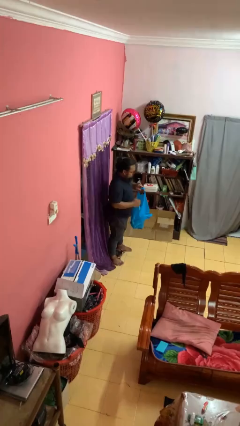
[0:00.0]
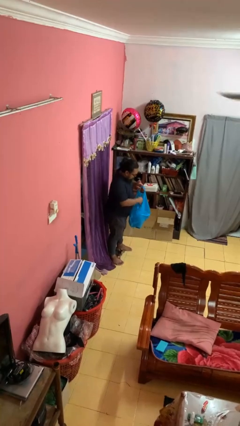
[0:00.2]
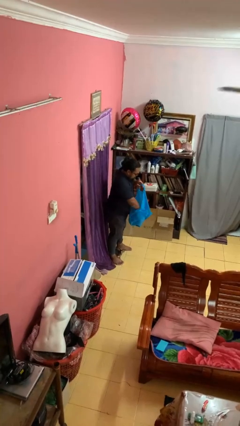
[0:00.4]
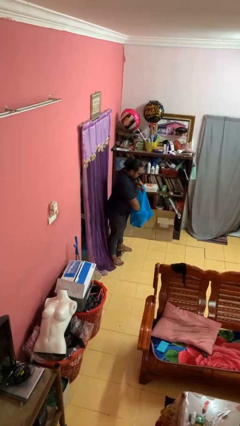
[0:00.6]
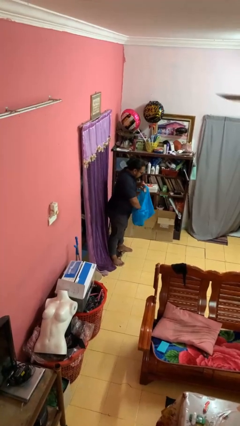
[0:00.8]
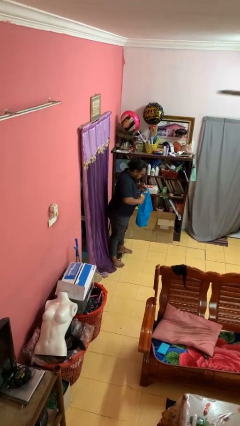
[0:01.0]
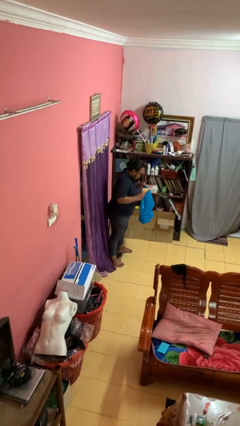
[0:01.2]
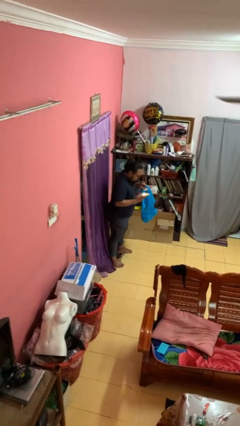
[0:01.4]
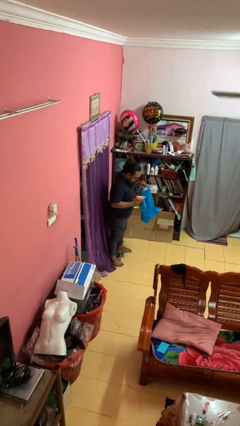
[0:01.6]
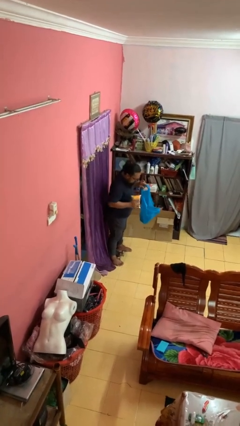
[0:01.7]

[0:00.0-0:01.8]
person takes object from bag

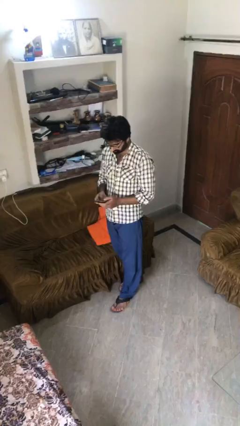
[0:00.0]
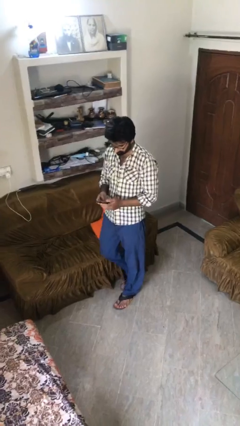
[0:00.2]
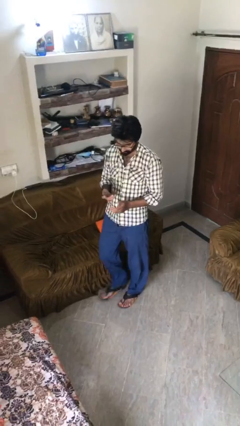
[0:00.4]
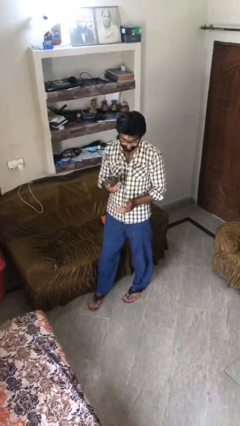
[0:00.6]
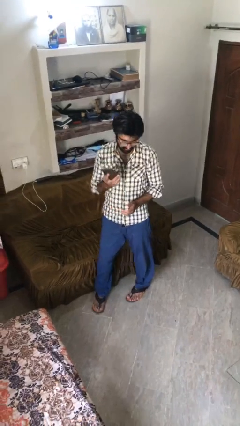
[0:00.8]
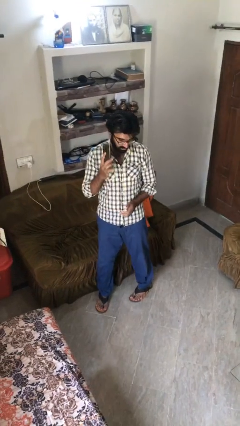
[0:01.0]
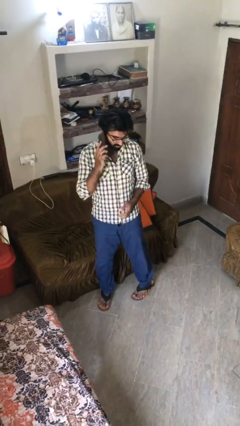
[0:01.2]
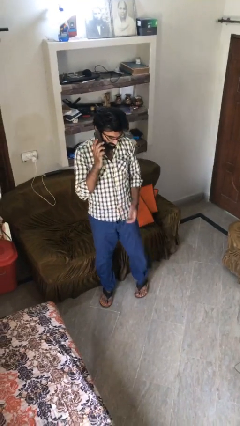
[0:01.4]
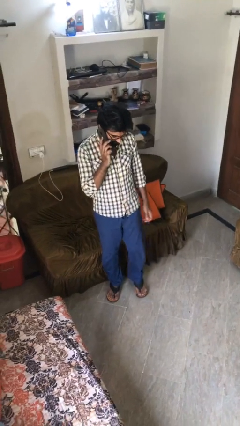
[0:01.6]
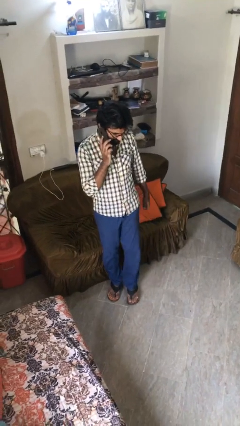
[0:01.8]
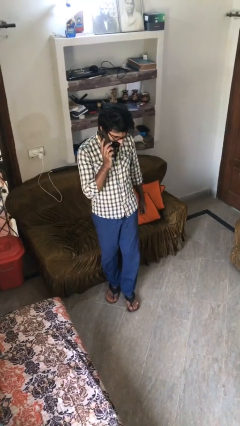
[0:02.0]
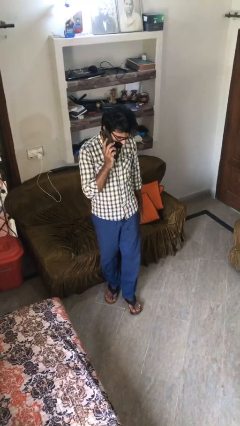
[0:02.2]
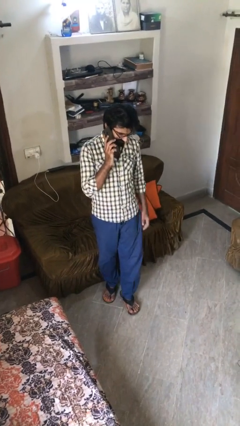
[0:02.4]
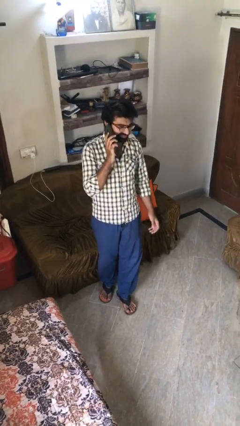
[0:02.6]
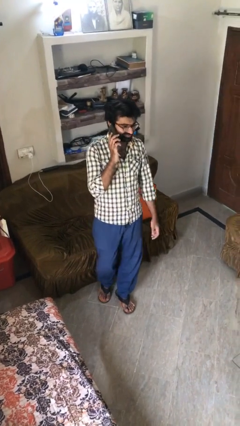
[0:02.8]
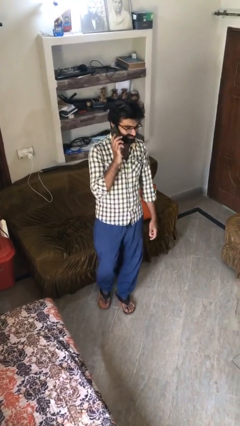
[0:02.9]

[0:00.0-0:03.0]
person talks on phone

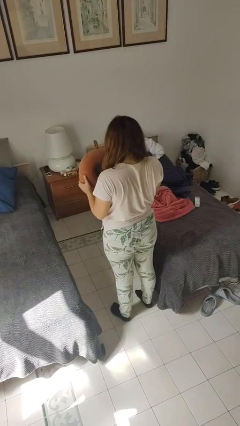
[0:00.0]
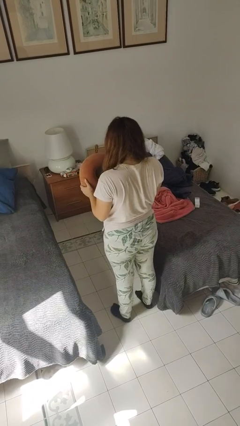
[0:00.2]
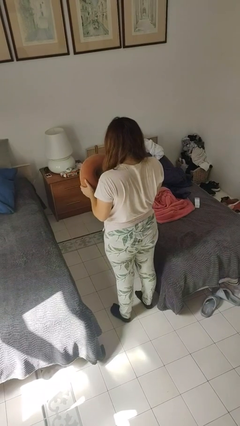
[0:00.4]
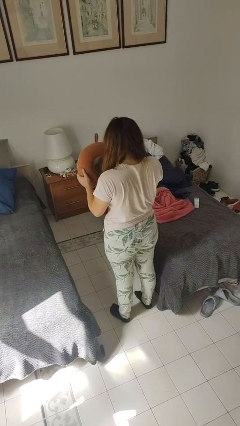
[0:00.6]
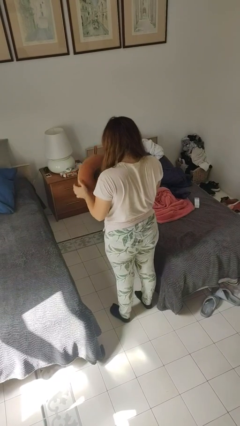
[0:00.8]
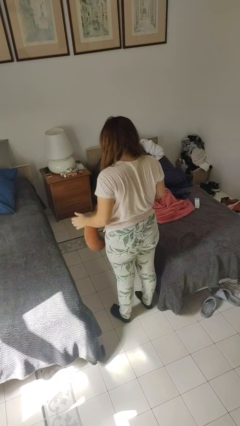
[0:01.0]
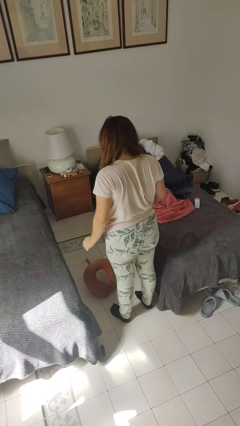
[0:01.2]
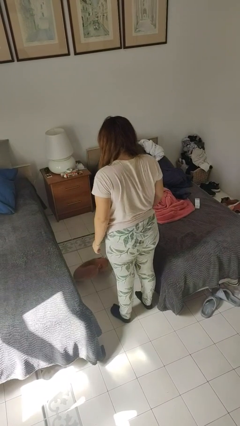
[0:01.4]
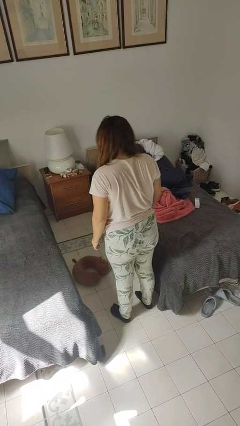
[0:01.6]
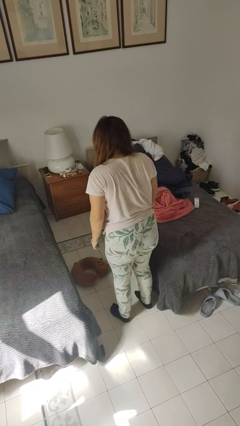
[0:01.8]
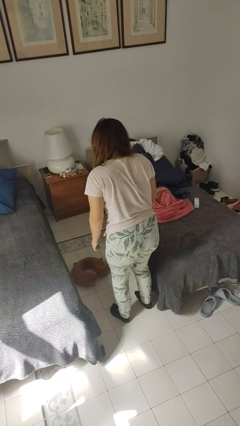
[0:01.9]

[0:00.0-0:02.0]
person throws object into air

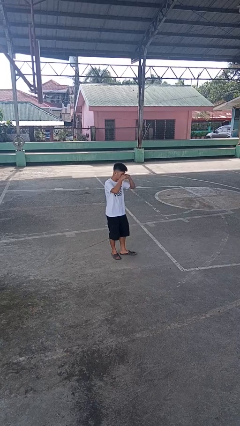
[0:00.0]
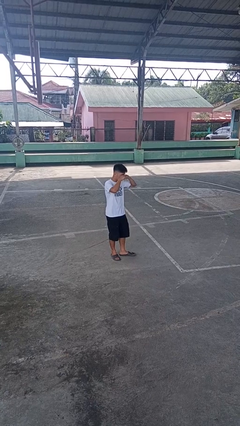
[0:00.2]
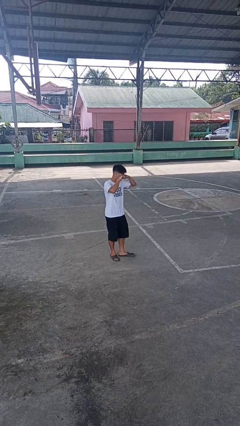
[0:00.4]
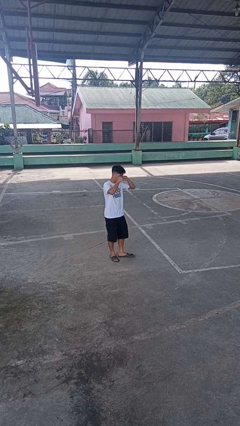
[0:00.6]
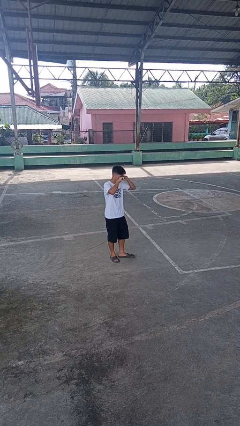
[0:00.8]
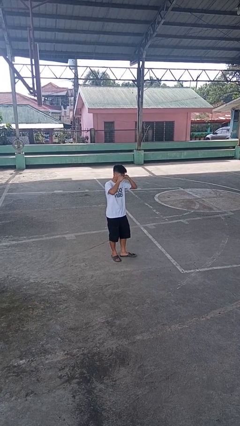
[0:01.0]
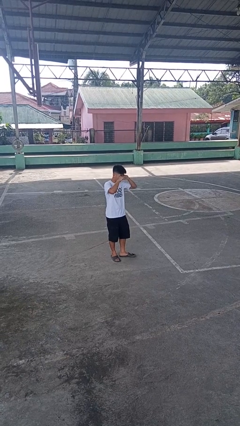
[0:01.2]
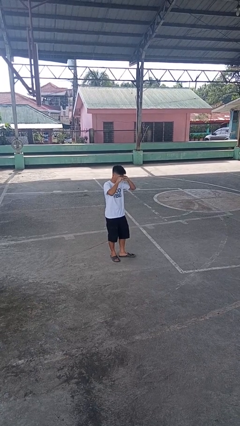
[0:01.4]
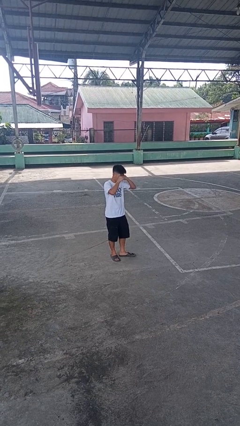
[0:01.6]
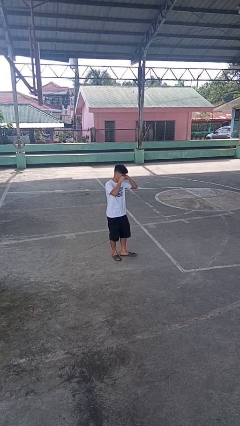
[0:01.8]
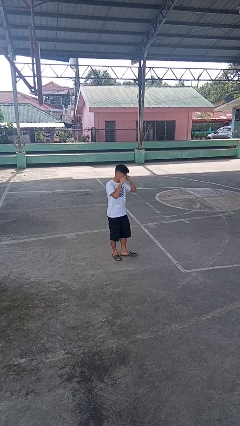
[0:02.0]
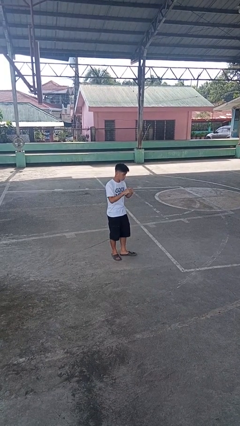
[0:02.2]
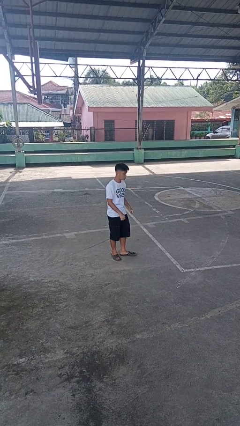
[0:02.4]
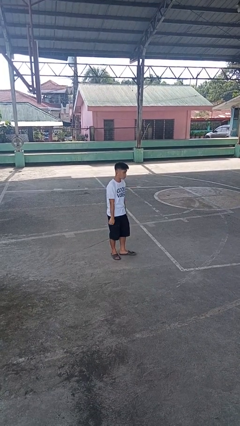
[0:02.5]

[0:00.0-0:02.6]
person rubs eyes

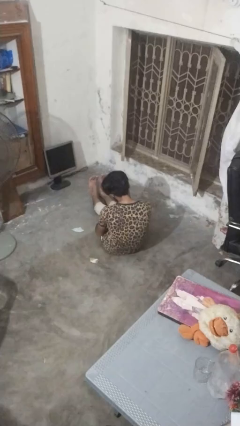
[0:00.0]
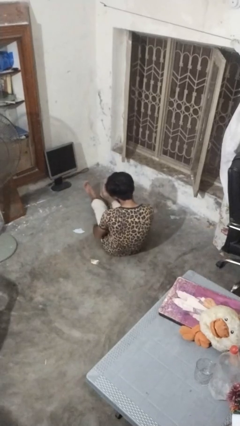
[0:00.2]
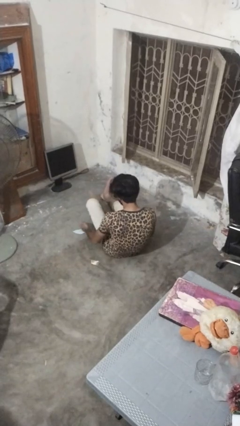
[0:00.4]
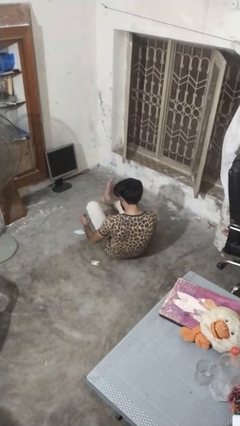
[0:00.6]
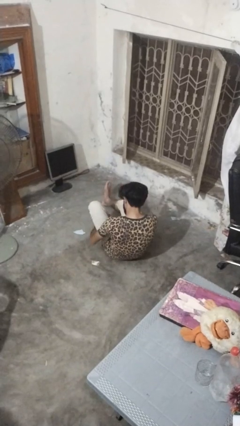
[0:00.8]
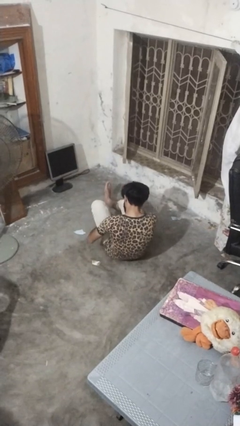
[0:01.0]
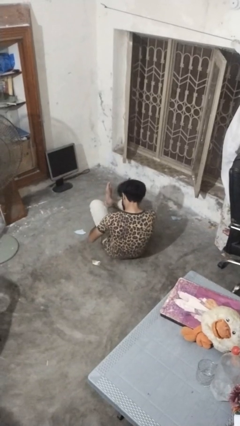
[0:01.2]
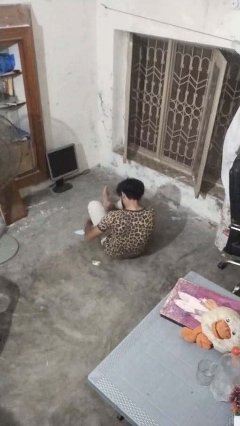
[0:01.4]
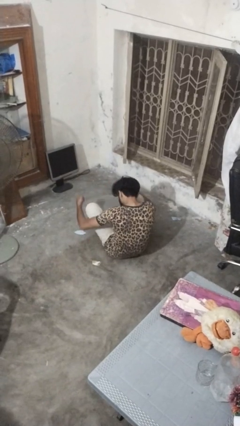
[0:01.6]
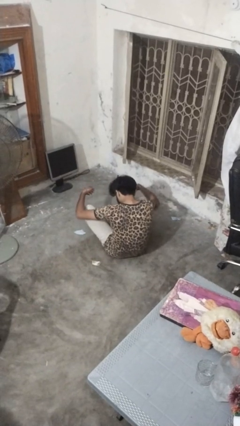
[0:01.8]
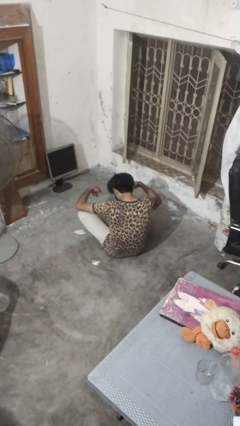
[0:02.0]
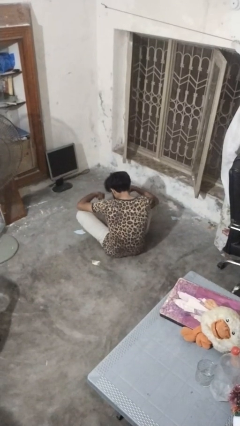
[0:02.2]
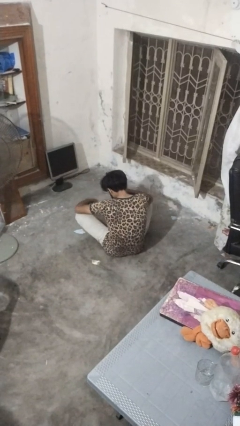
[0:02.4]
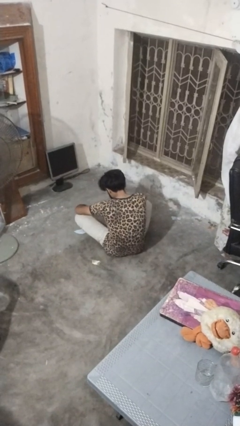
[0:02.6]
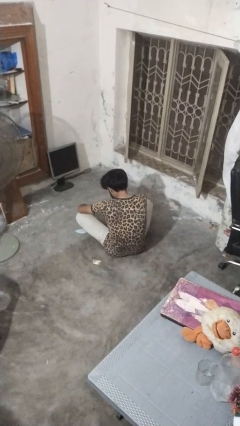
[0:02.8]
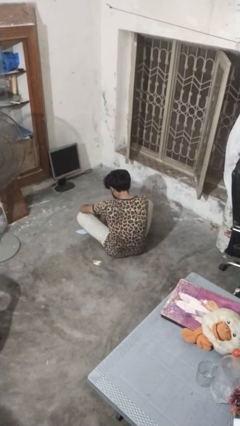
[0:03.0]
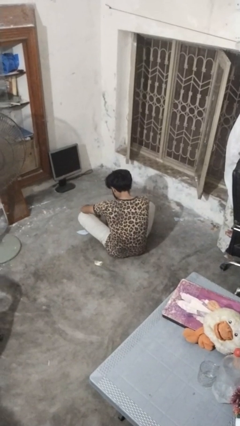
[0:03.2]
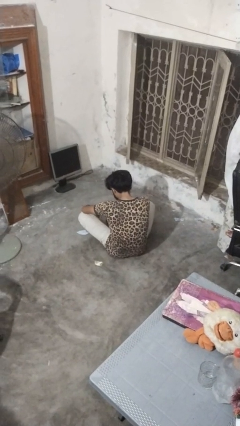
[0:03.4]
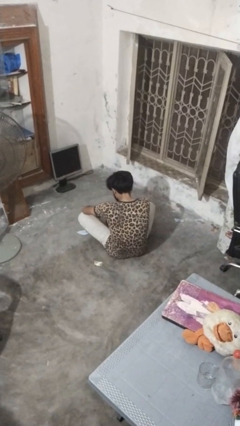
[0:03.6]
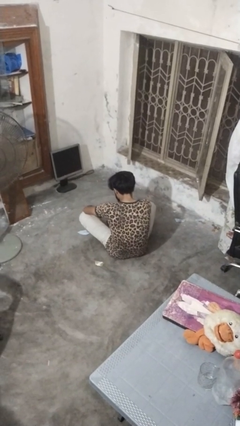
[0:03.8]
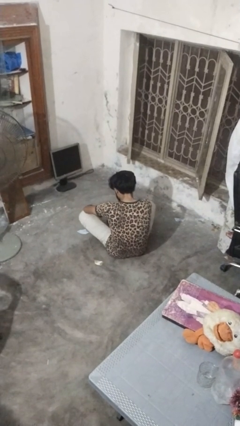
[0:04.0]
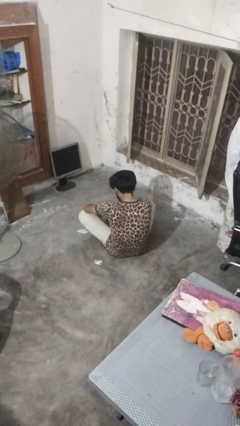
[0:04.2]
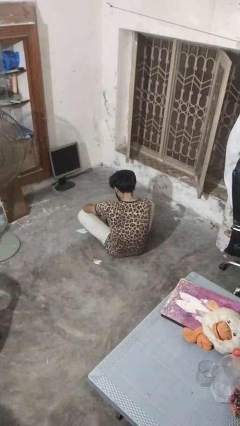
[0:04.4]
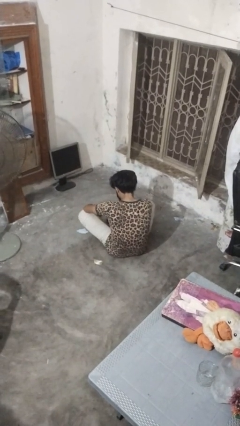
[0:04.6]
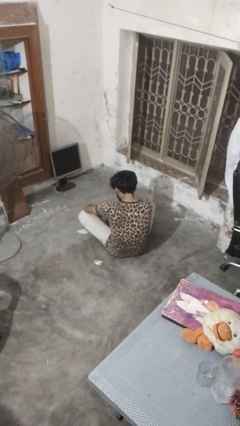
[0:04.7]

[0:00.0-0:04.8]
person crosses legs

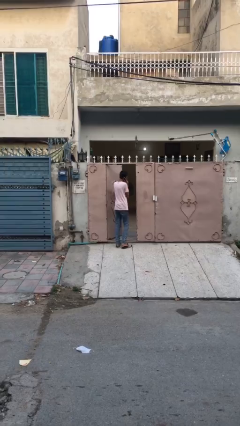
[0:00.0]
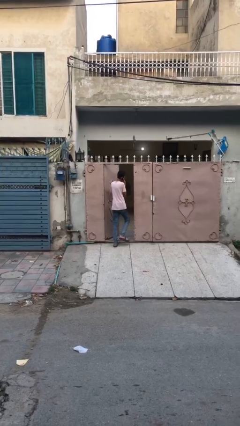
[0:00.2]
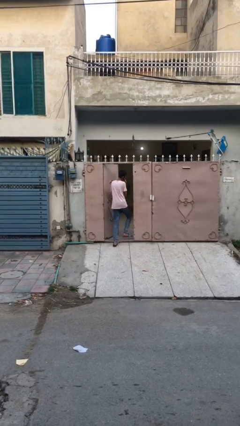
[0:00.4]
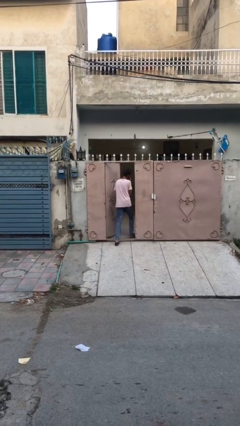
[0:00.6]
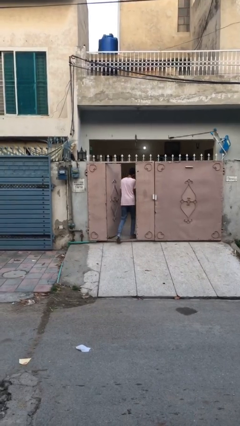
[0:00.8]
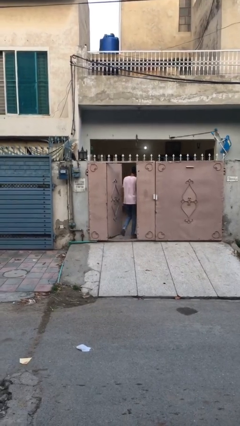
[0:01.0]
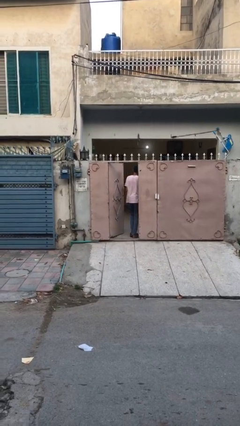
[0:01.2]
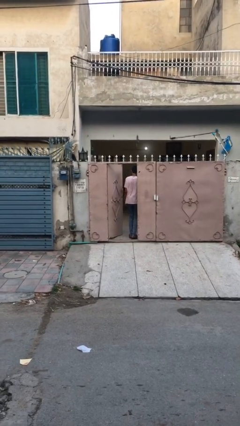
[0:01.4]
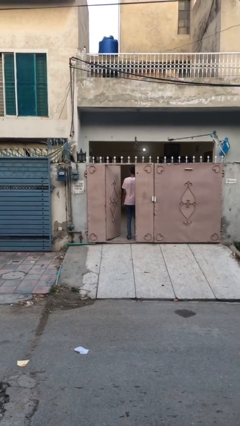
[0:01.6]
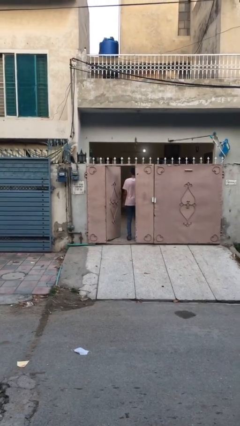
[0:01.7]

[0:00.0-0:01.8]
person exits scene through structure

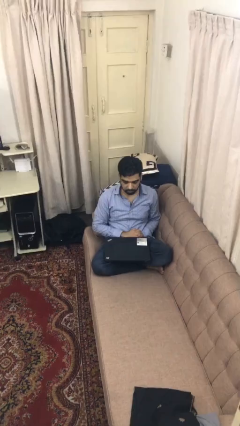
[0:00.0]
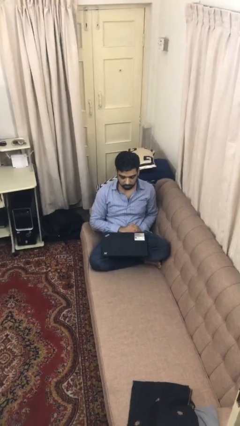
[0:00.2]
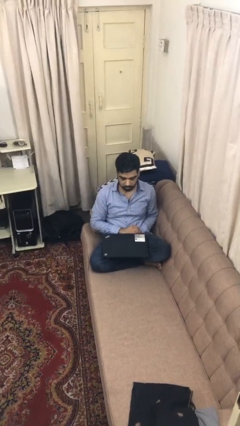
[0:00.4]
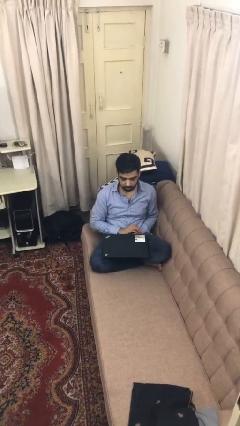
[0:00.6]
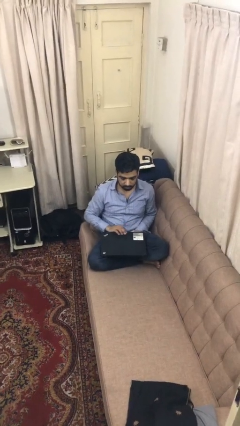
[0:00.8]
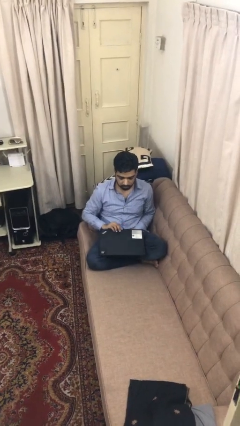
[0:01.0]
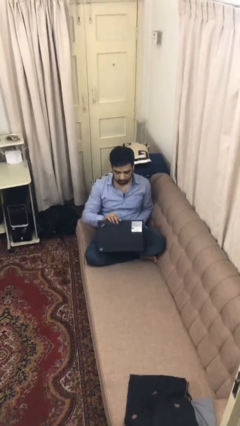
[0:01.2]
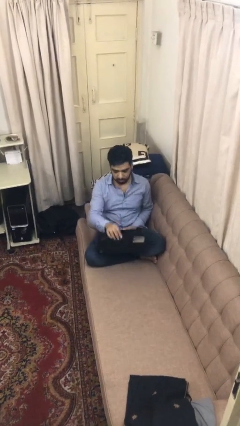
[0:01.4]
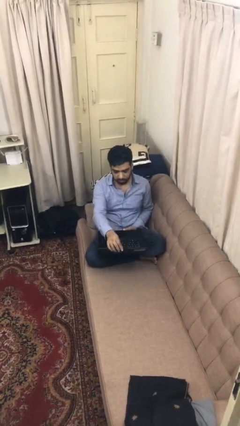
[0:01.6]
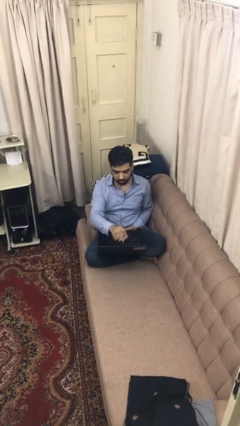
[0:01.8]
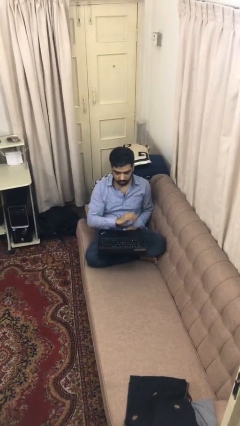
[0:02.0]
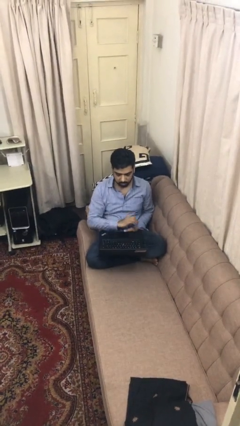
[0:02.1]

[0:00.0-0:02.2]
person opens laptop
